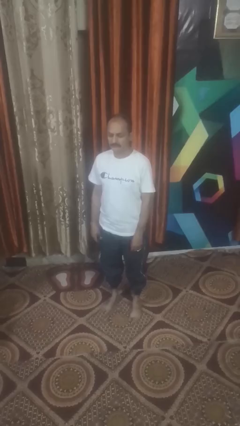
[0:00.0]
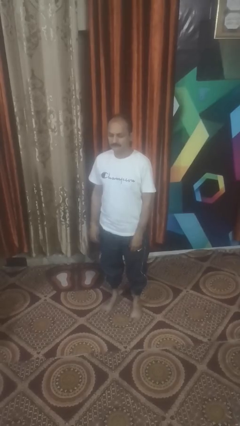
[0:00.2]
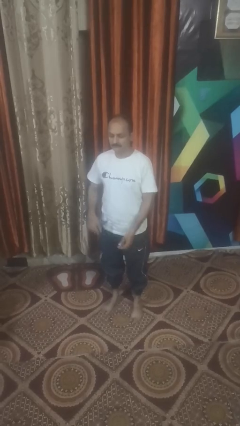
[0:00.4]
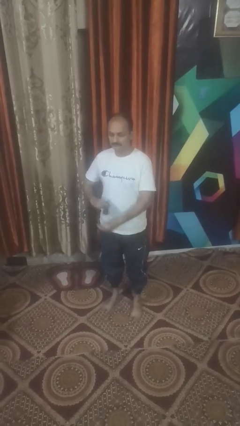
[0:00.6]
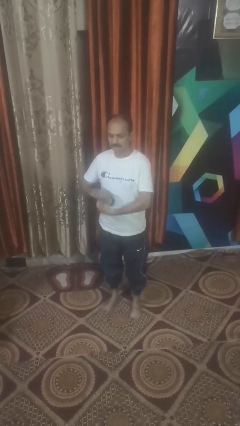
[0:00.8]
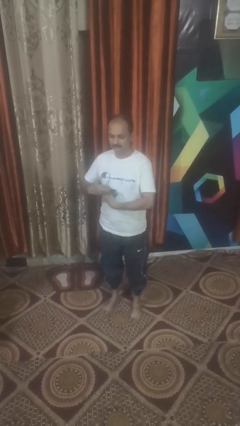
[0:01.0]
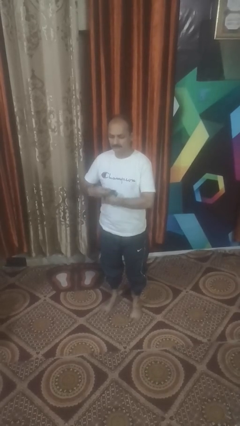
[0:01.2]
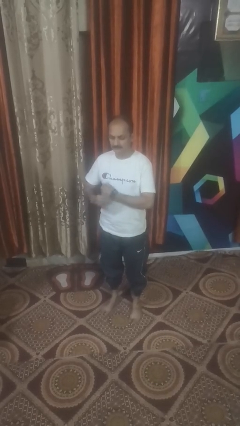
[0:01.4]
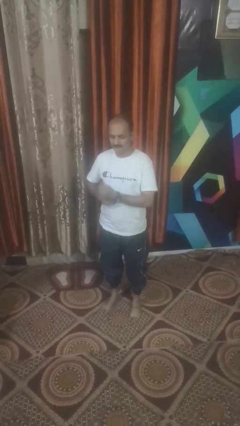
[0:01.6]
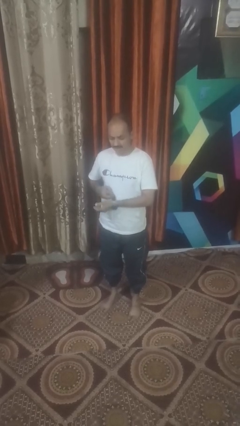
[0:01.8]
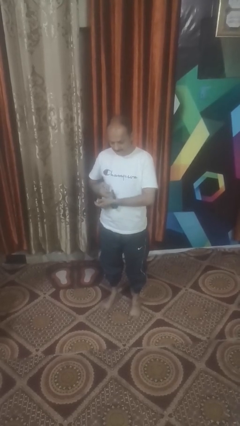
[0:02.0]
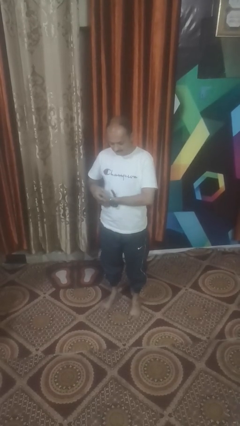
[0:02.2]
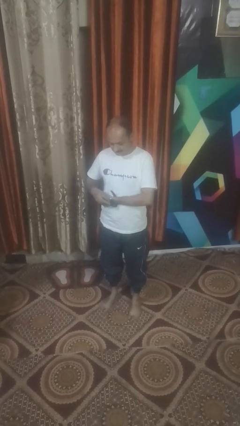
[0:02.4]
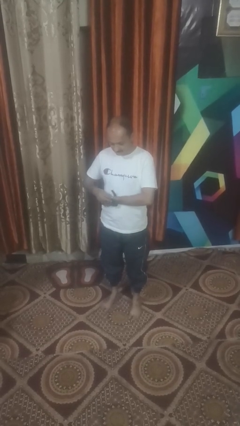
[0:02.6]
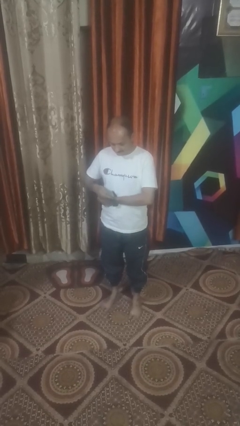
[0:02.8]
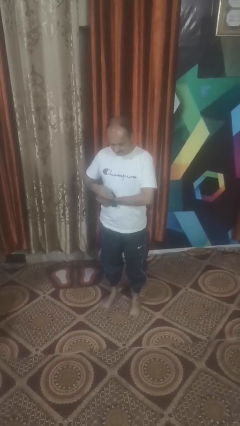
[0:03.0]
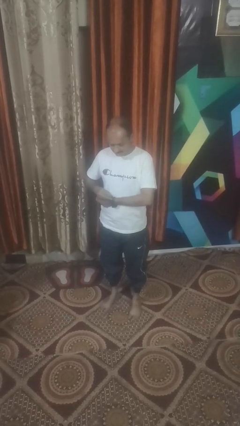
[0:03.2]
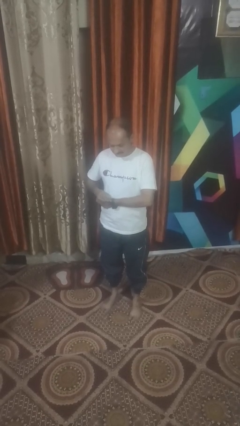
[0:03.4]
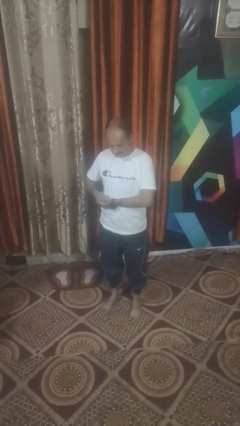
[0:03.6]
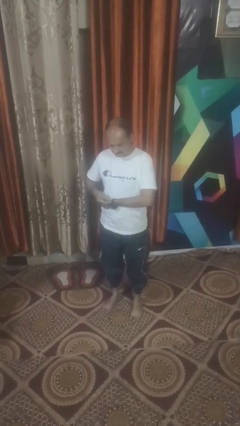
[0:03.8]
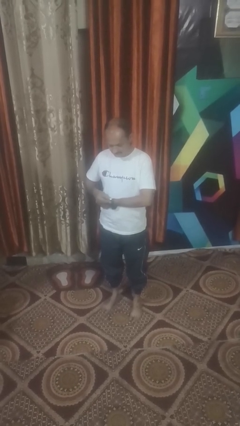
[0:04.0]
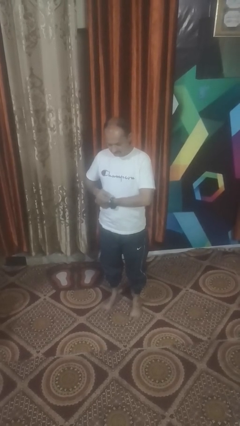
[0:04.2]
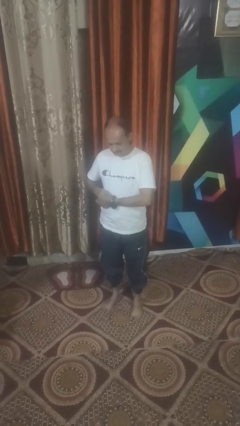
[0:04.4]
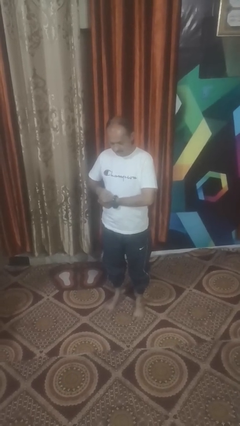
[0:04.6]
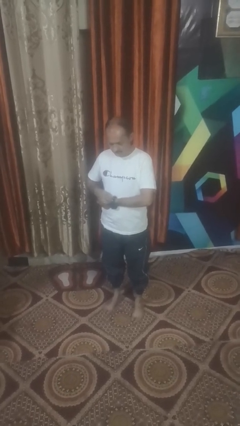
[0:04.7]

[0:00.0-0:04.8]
person puts on wristwatch

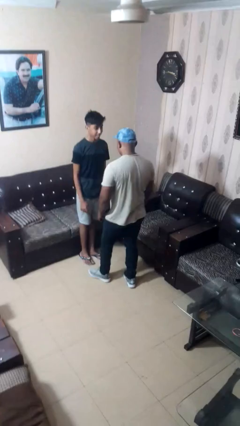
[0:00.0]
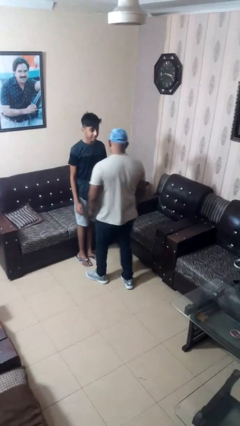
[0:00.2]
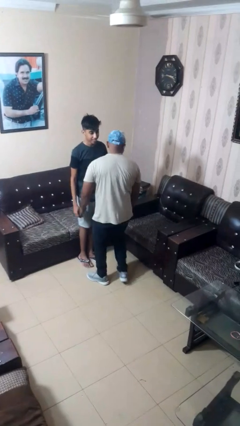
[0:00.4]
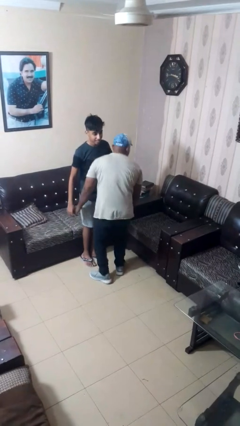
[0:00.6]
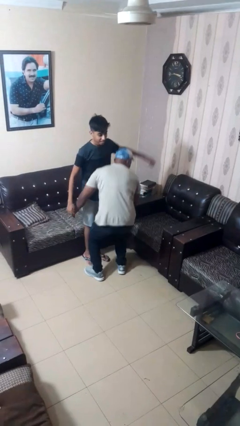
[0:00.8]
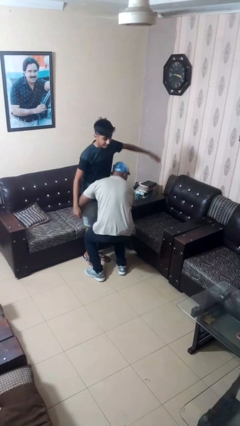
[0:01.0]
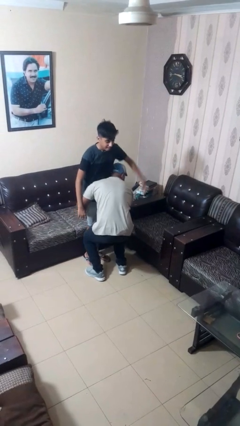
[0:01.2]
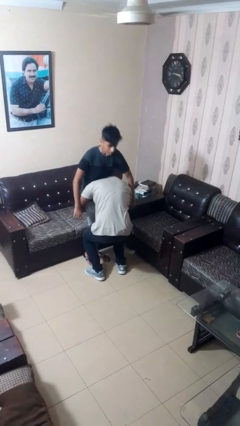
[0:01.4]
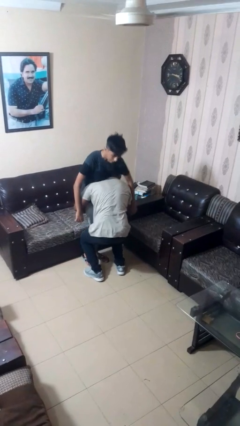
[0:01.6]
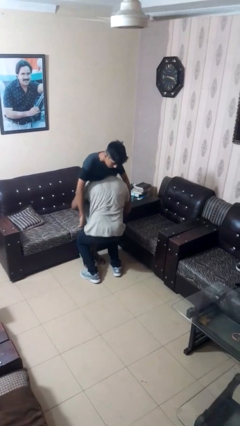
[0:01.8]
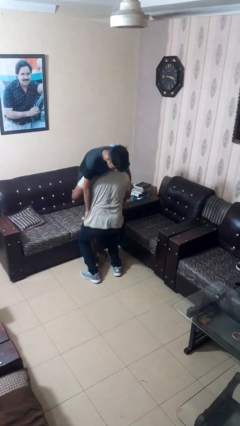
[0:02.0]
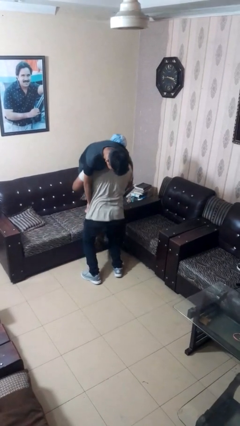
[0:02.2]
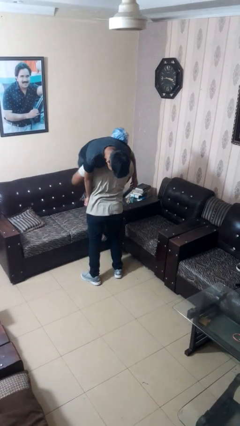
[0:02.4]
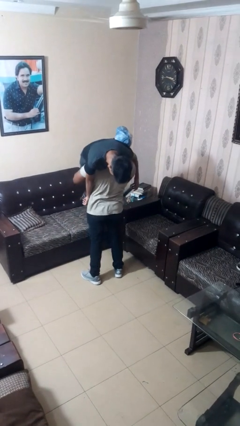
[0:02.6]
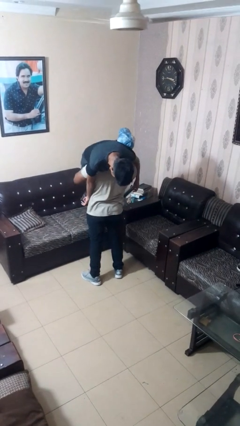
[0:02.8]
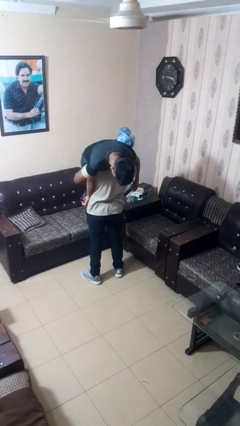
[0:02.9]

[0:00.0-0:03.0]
person picks up person

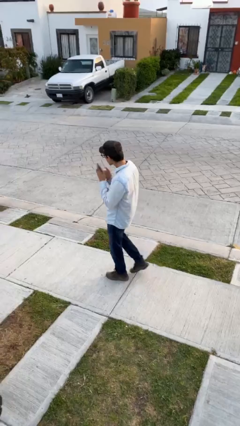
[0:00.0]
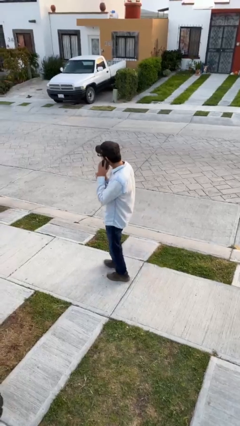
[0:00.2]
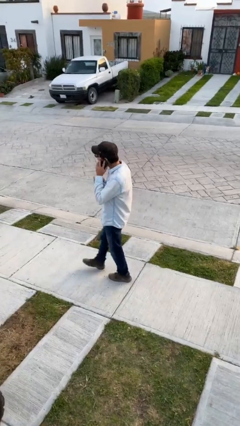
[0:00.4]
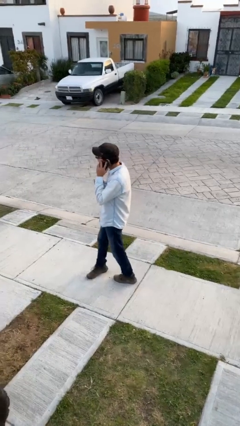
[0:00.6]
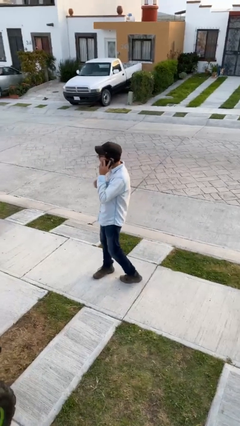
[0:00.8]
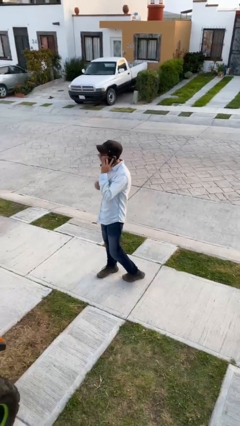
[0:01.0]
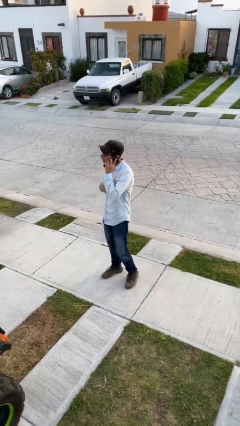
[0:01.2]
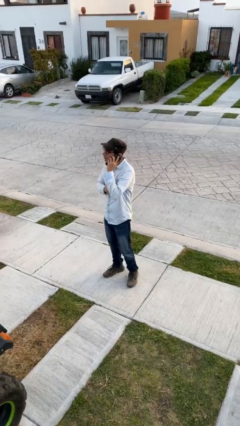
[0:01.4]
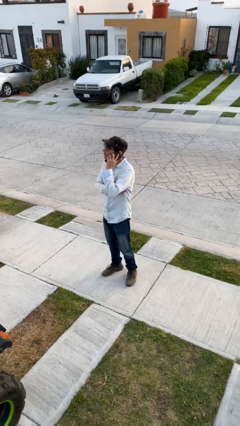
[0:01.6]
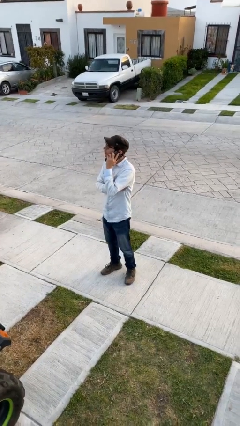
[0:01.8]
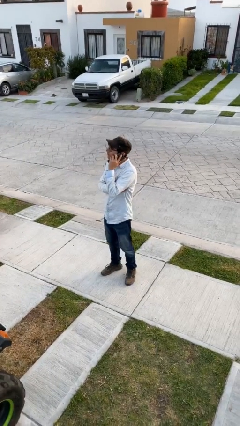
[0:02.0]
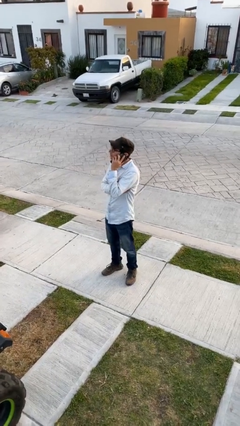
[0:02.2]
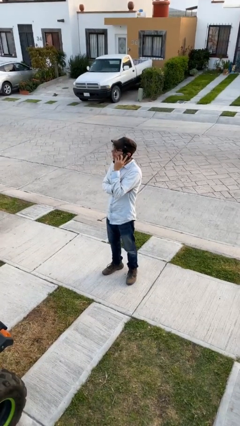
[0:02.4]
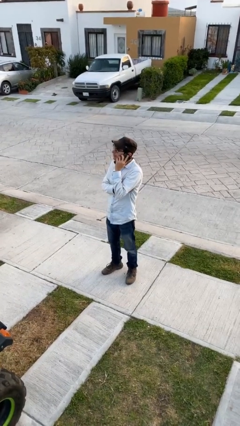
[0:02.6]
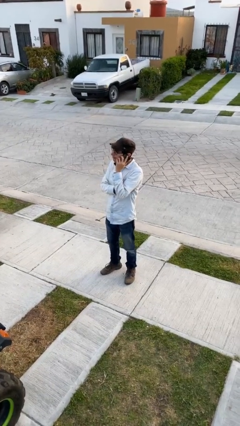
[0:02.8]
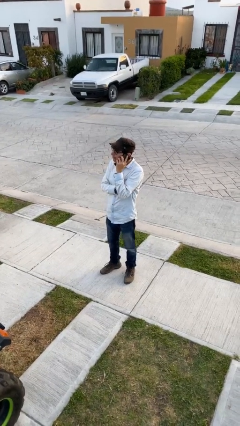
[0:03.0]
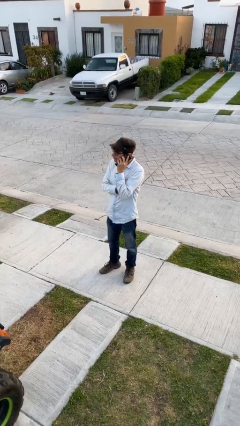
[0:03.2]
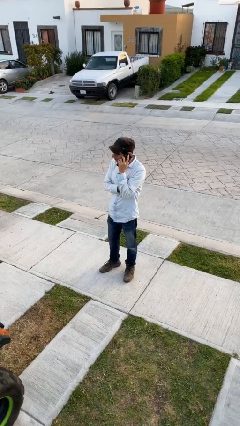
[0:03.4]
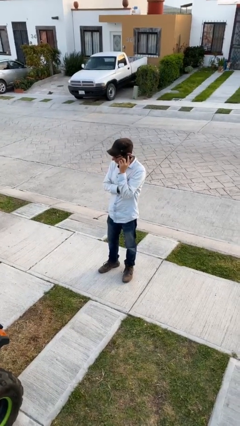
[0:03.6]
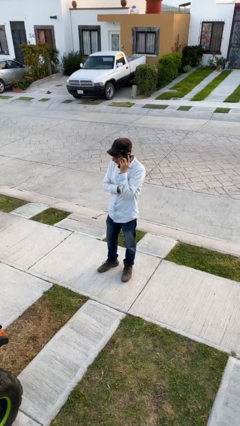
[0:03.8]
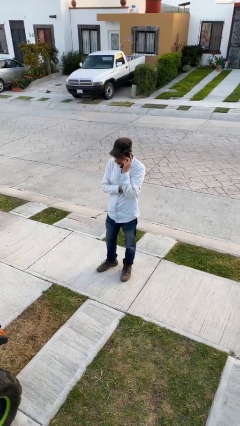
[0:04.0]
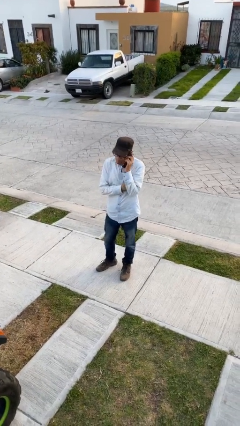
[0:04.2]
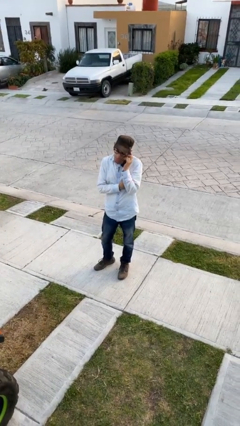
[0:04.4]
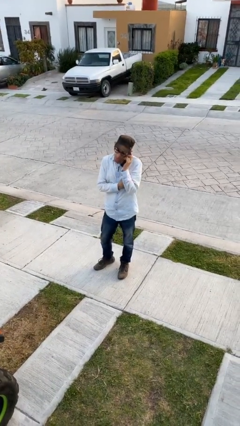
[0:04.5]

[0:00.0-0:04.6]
person talks on phone

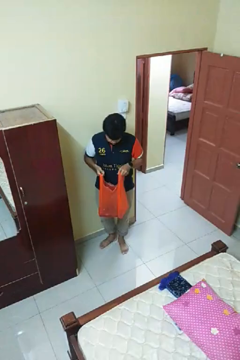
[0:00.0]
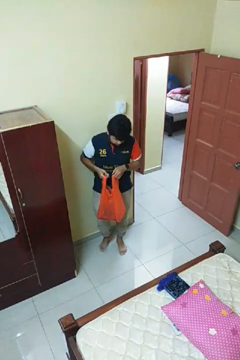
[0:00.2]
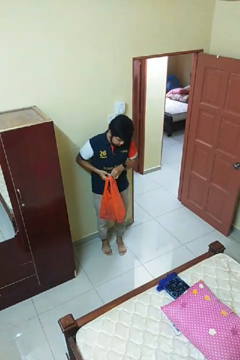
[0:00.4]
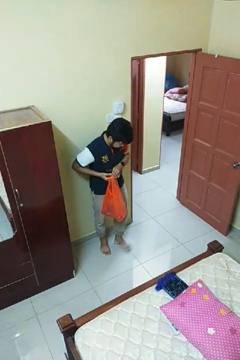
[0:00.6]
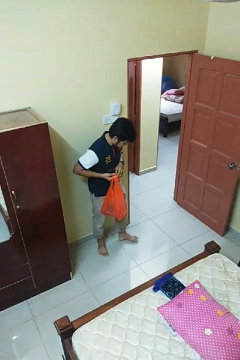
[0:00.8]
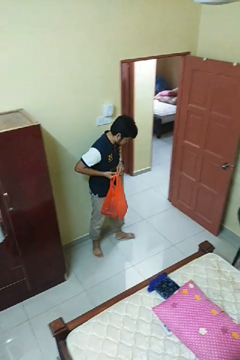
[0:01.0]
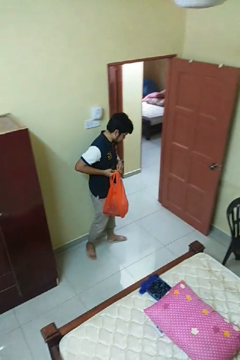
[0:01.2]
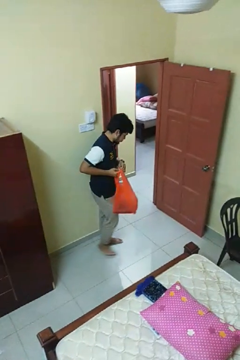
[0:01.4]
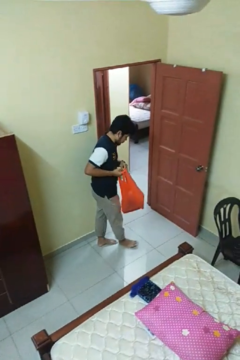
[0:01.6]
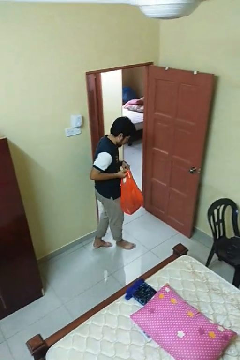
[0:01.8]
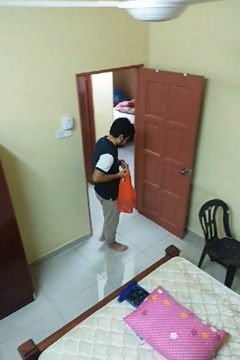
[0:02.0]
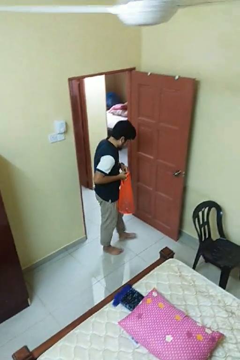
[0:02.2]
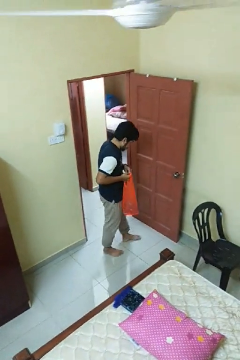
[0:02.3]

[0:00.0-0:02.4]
person carries groceries

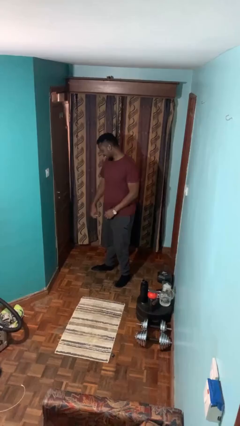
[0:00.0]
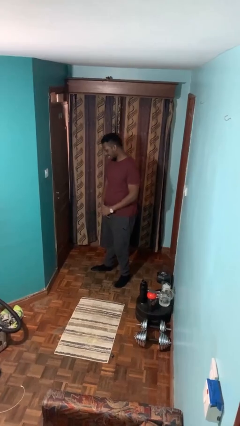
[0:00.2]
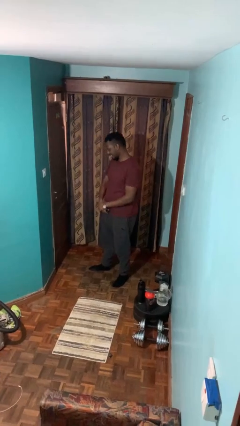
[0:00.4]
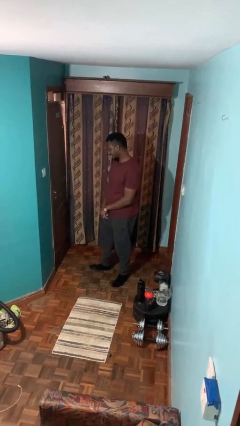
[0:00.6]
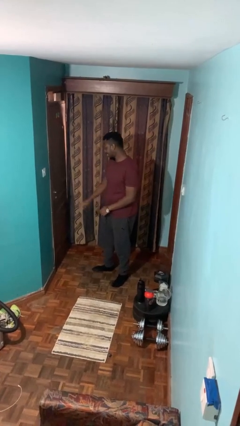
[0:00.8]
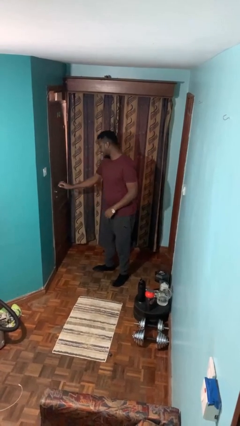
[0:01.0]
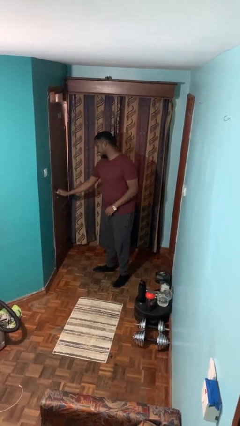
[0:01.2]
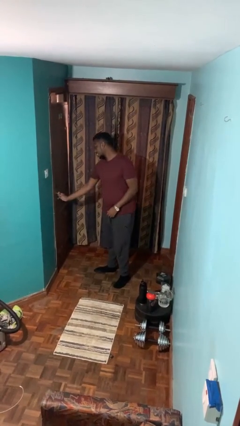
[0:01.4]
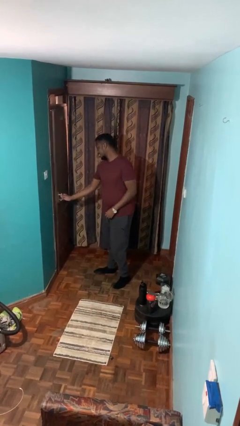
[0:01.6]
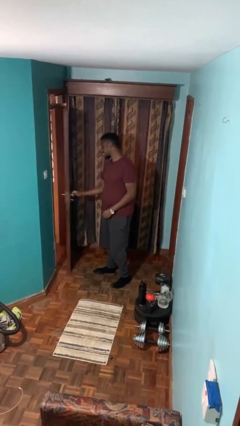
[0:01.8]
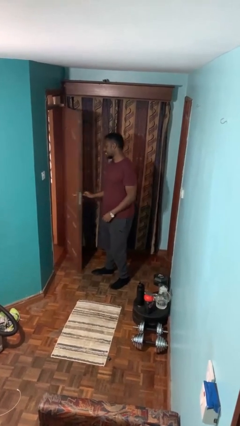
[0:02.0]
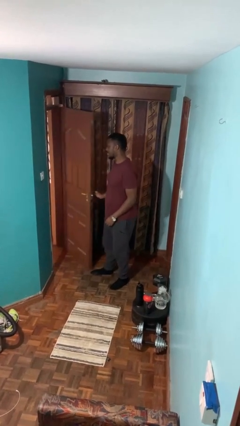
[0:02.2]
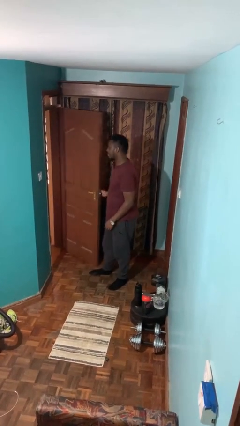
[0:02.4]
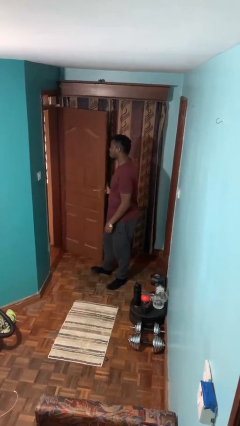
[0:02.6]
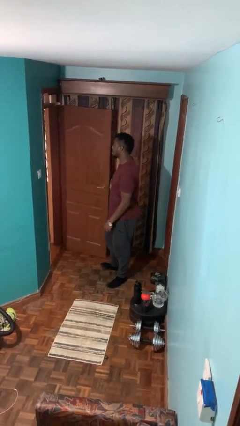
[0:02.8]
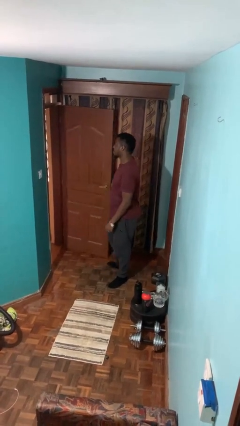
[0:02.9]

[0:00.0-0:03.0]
person opens facility door
